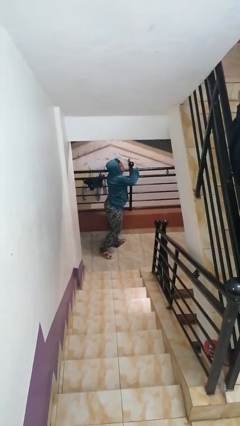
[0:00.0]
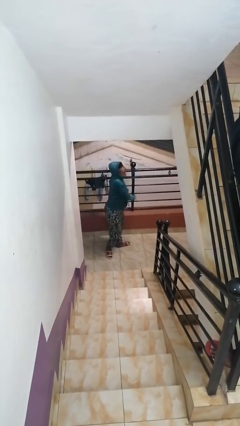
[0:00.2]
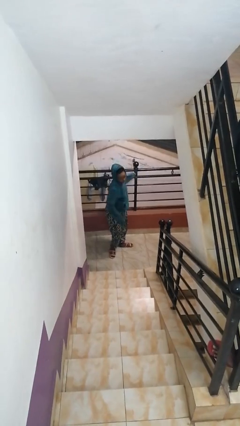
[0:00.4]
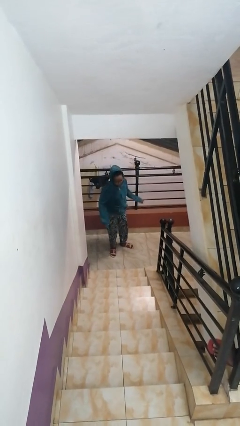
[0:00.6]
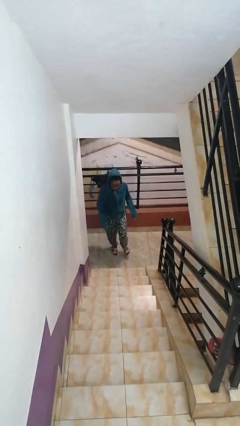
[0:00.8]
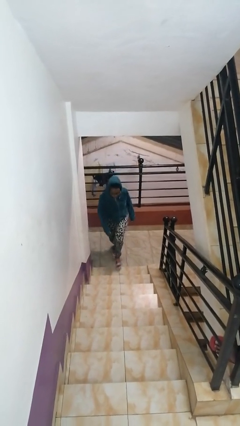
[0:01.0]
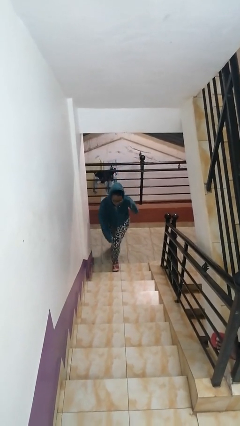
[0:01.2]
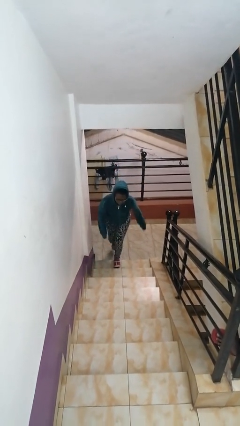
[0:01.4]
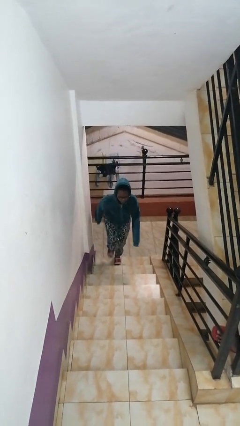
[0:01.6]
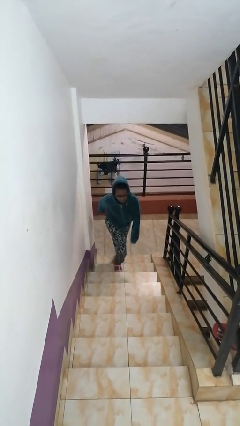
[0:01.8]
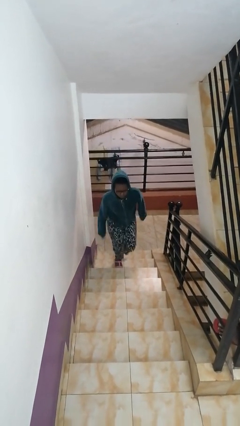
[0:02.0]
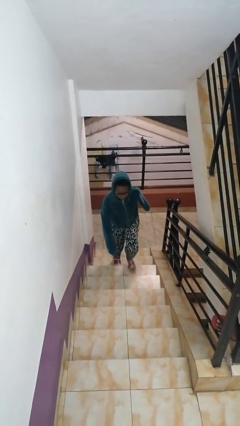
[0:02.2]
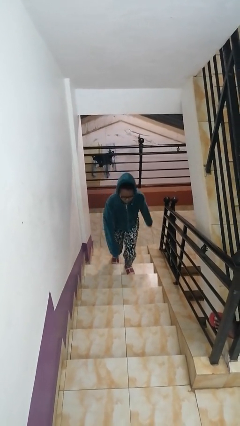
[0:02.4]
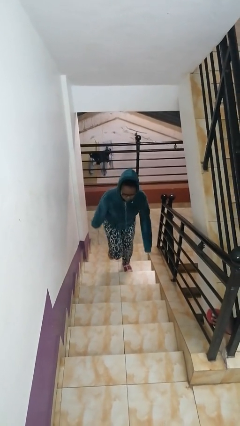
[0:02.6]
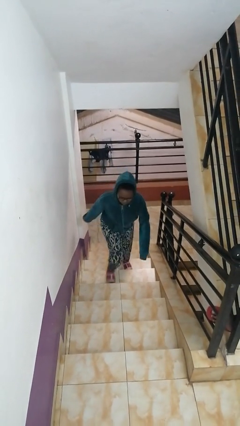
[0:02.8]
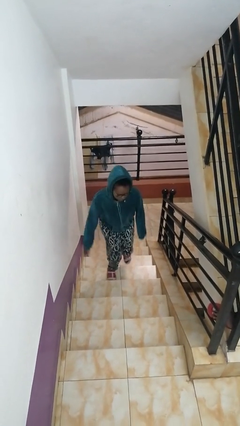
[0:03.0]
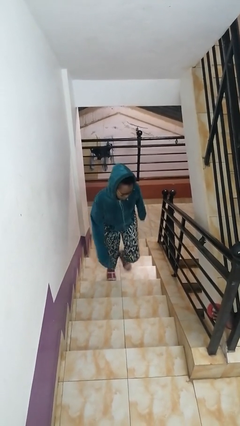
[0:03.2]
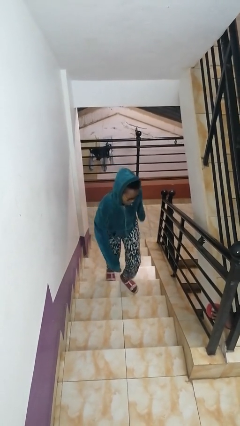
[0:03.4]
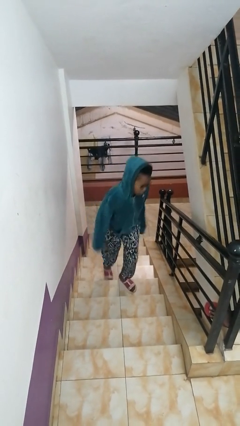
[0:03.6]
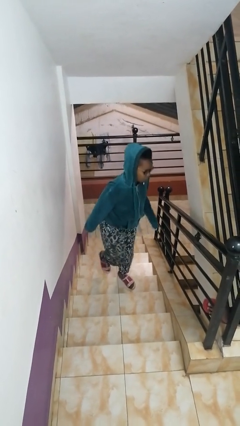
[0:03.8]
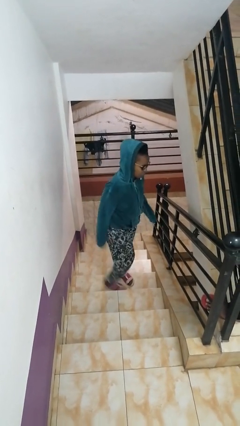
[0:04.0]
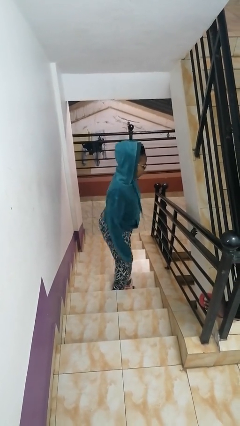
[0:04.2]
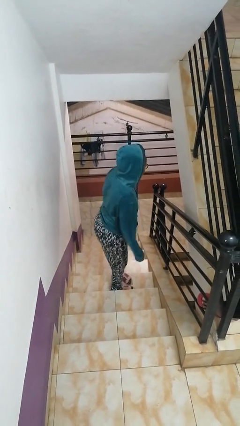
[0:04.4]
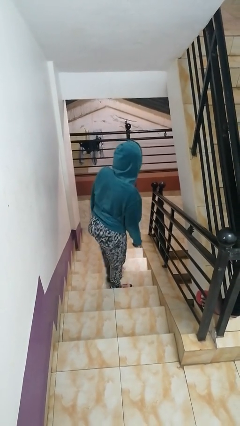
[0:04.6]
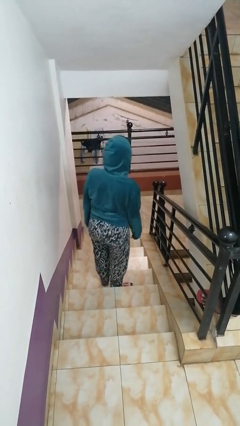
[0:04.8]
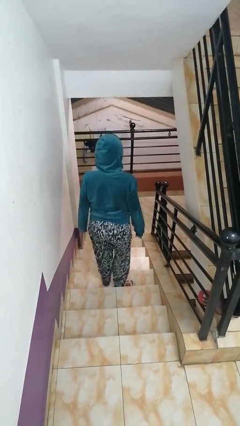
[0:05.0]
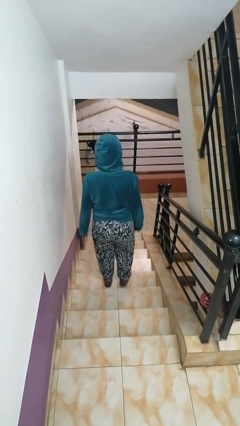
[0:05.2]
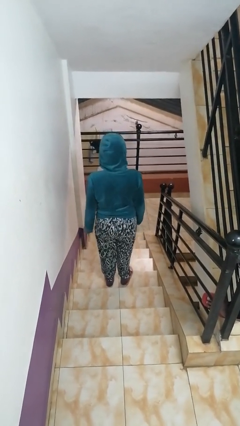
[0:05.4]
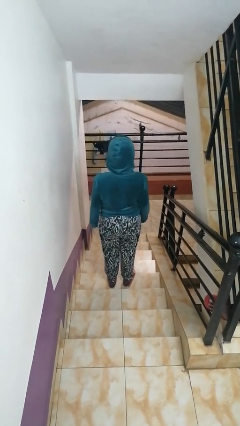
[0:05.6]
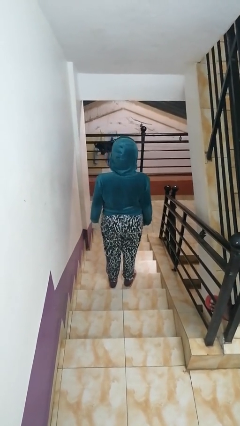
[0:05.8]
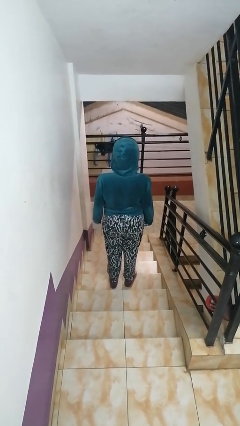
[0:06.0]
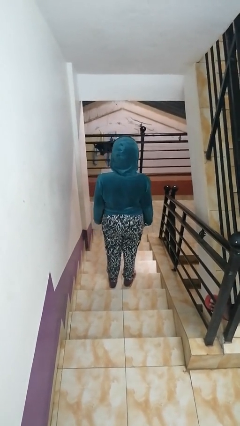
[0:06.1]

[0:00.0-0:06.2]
person climbs up stairs

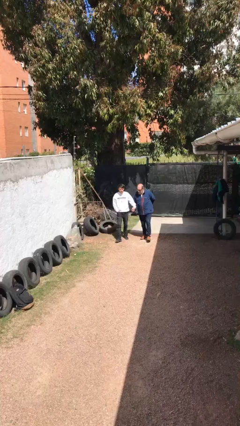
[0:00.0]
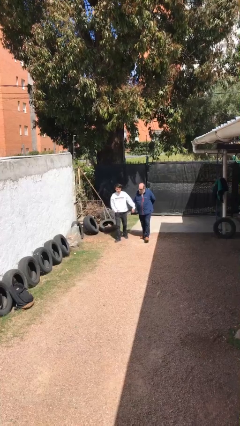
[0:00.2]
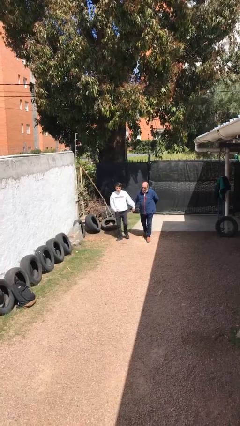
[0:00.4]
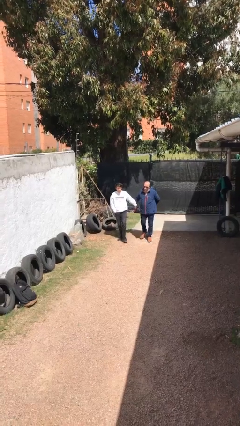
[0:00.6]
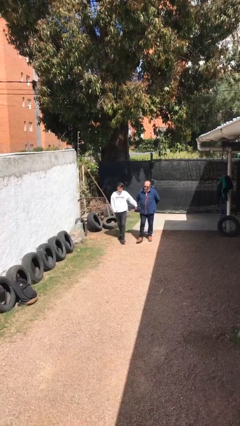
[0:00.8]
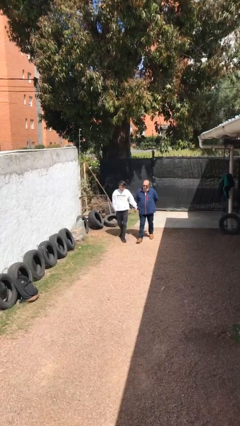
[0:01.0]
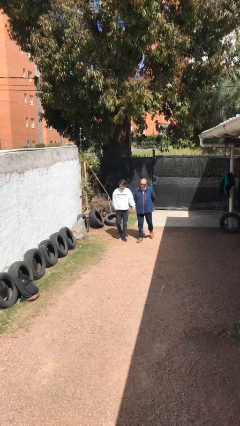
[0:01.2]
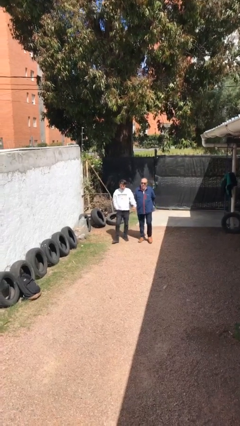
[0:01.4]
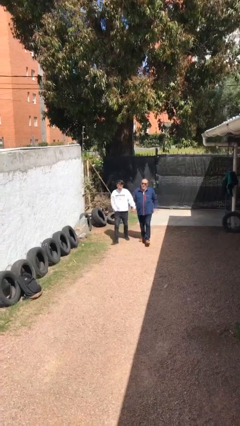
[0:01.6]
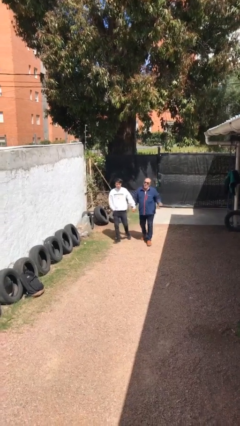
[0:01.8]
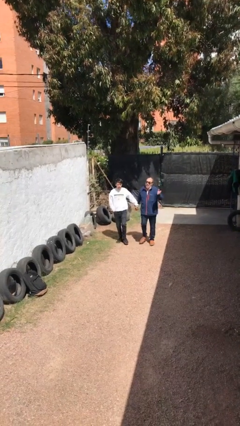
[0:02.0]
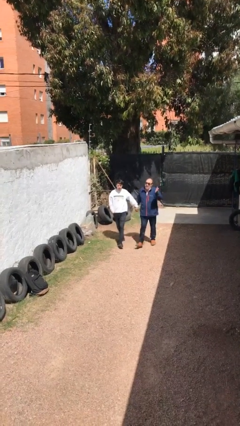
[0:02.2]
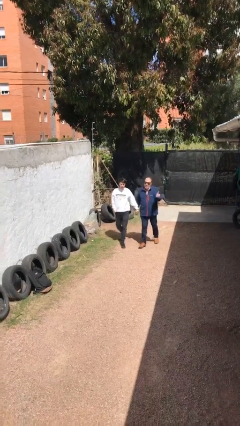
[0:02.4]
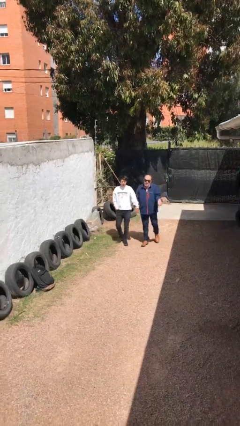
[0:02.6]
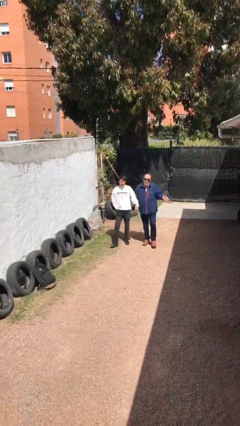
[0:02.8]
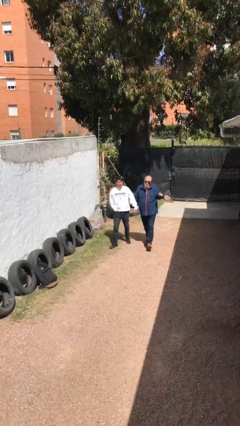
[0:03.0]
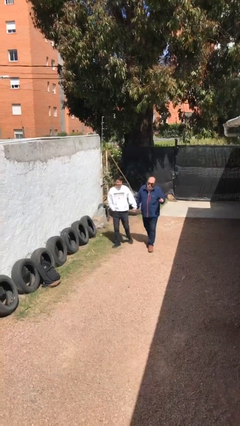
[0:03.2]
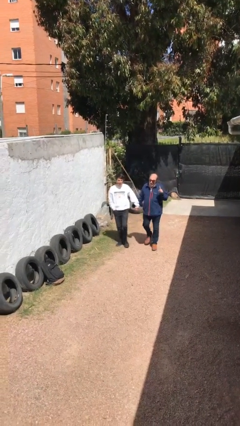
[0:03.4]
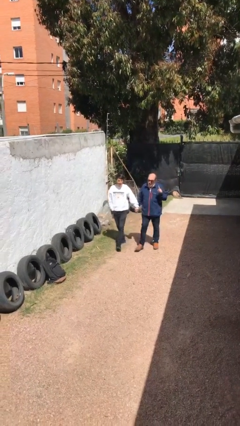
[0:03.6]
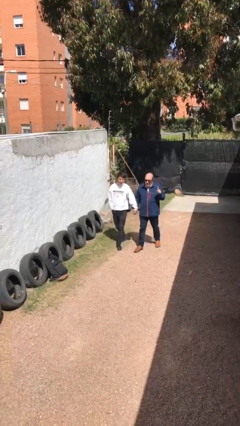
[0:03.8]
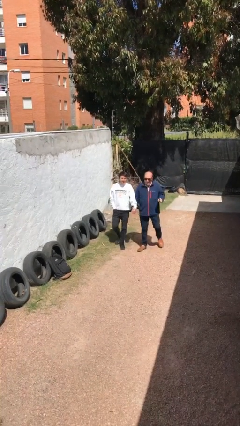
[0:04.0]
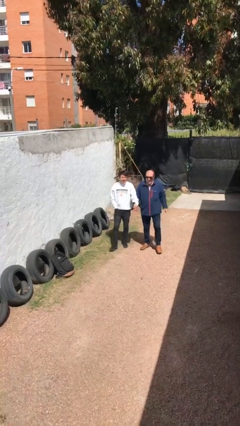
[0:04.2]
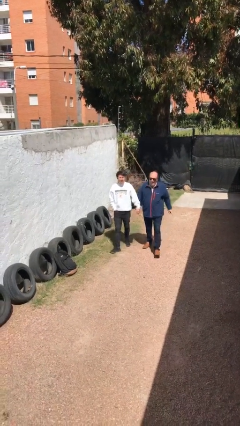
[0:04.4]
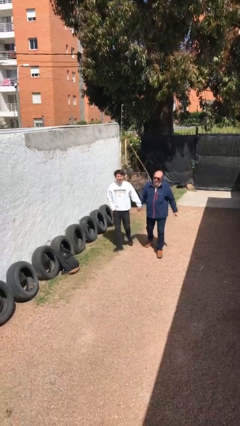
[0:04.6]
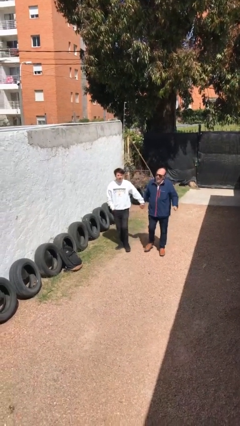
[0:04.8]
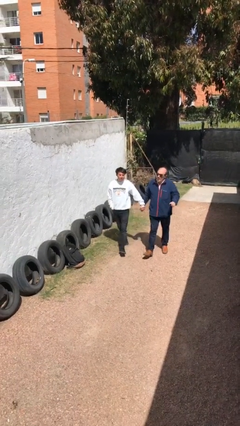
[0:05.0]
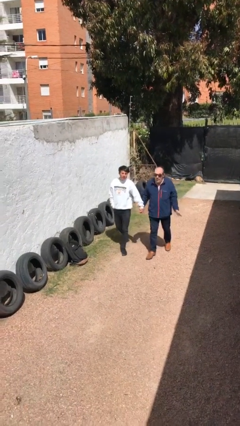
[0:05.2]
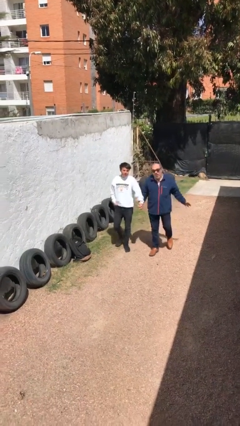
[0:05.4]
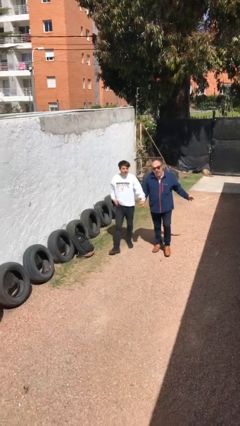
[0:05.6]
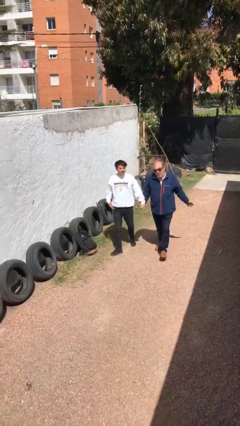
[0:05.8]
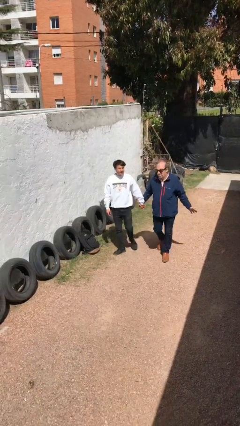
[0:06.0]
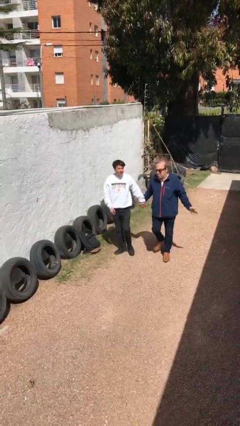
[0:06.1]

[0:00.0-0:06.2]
person holds hand

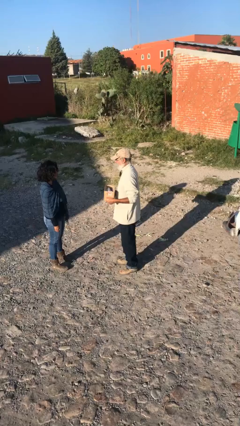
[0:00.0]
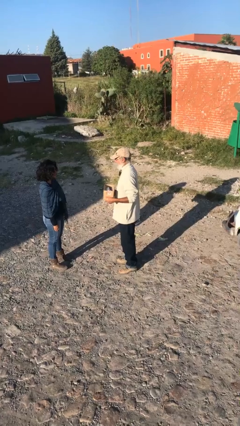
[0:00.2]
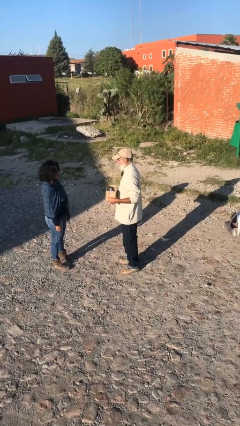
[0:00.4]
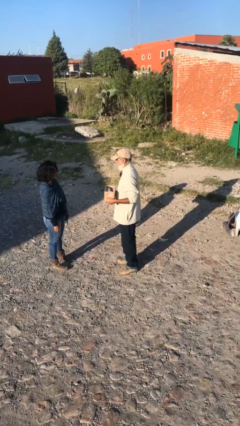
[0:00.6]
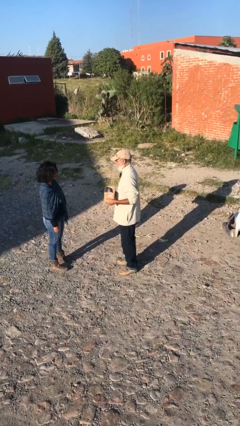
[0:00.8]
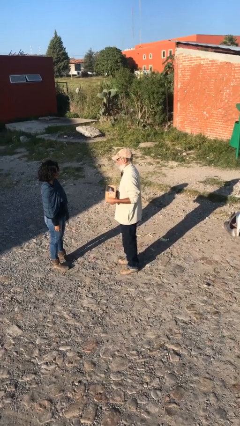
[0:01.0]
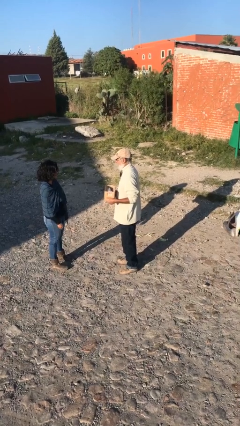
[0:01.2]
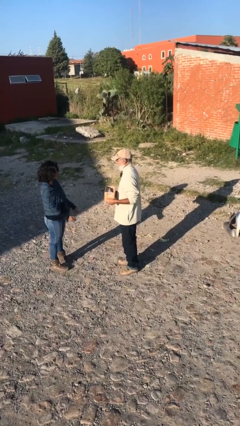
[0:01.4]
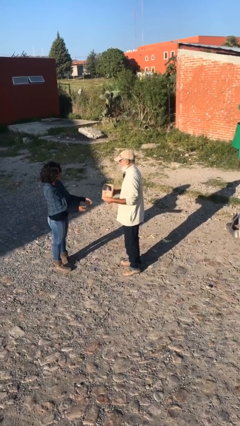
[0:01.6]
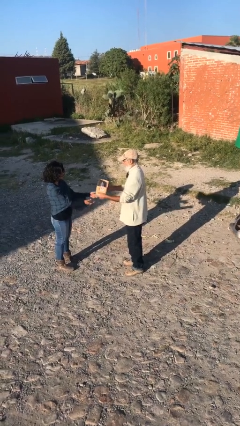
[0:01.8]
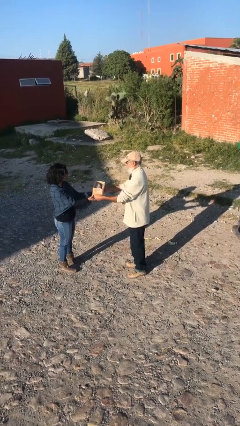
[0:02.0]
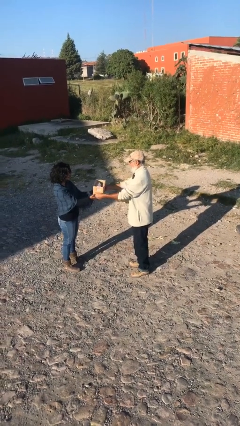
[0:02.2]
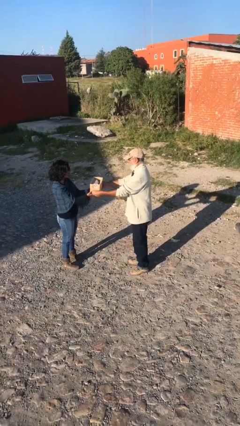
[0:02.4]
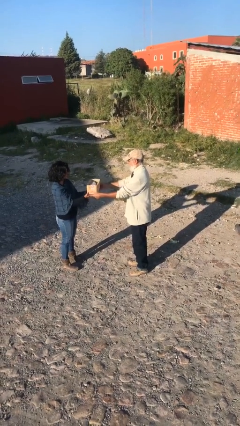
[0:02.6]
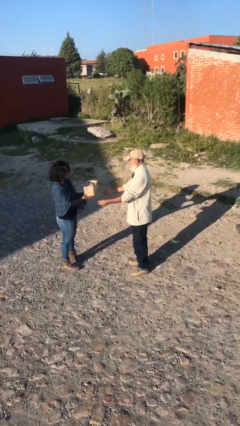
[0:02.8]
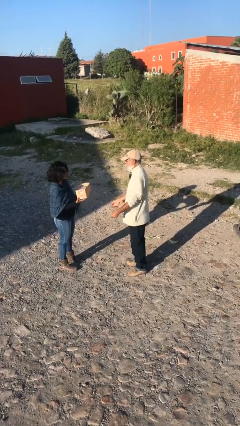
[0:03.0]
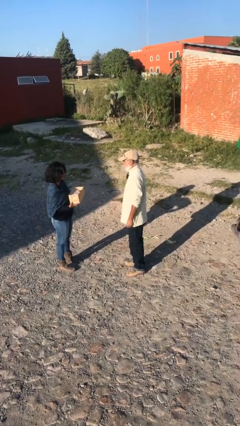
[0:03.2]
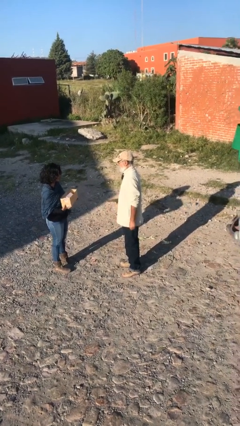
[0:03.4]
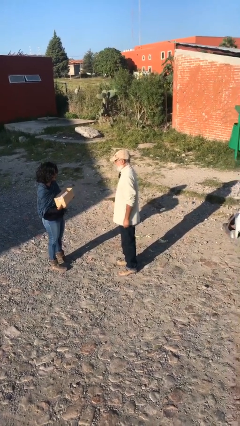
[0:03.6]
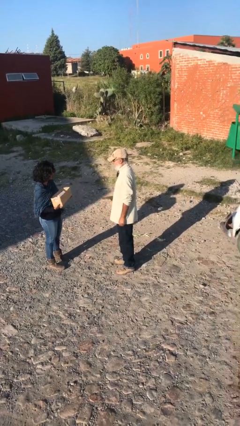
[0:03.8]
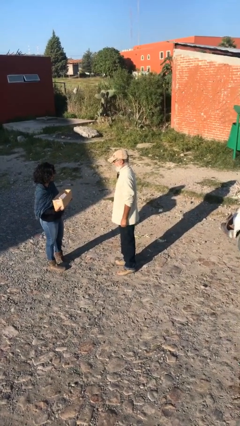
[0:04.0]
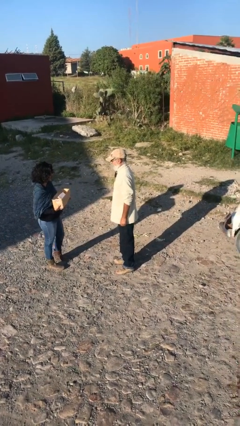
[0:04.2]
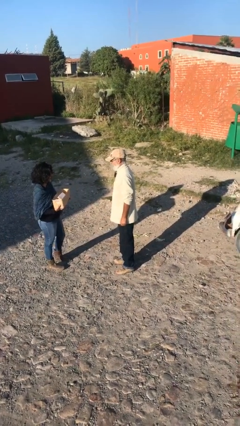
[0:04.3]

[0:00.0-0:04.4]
person transfers object to person

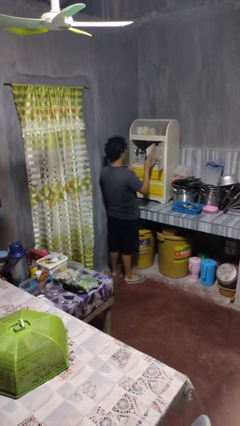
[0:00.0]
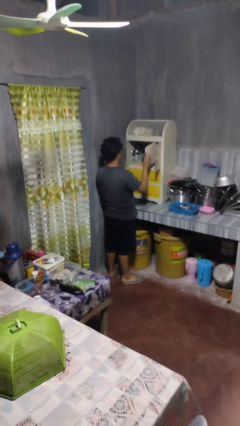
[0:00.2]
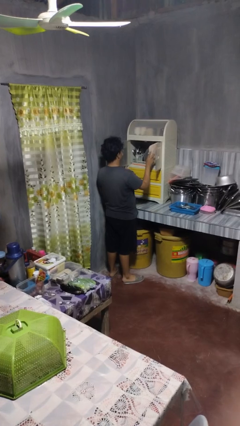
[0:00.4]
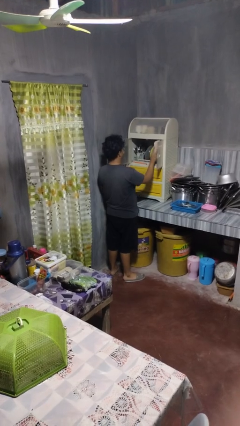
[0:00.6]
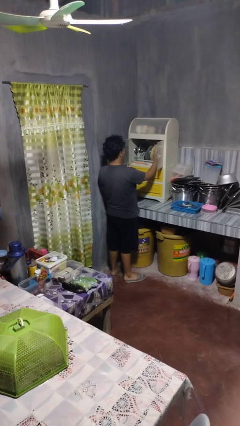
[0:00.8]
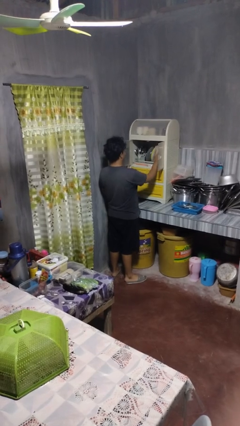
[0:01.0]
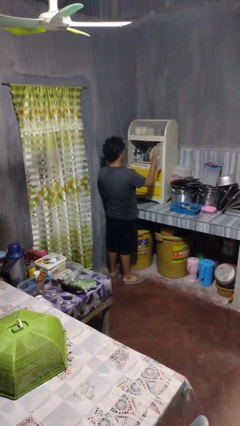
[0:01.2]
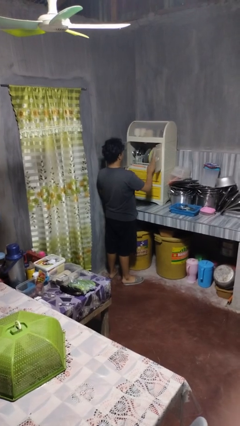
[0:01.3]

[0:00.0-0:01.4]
person puts down object into cabinet
